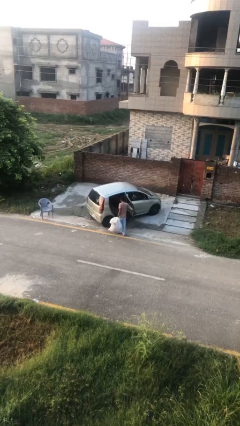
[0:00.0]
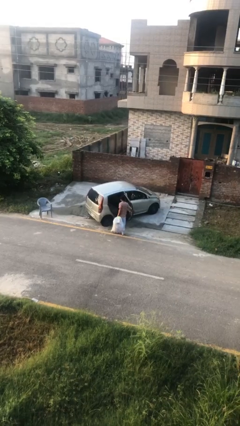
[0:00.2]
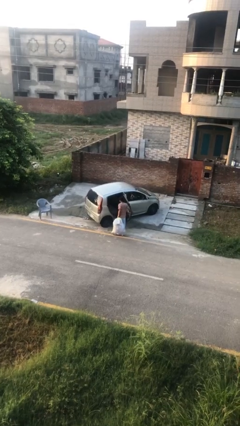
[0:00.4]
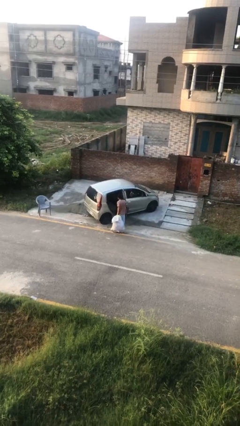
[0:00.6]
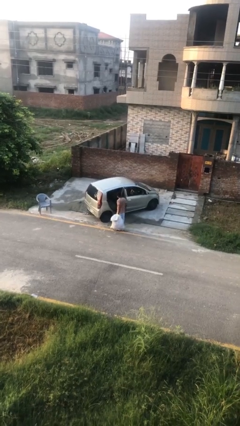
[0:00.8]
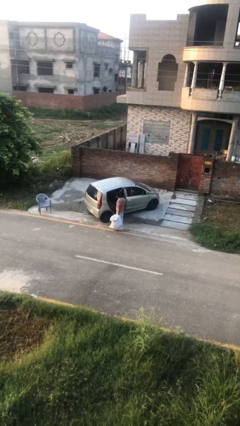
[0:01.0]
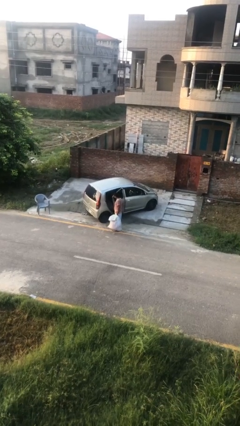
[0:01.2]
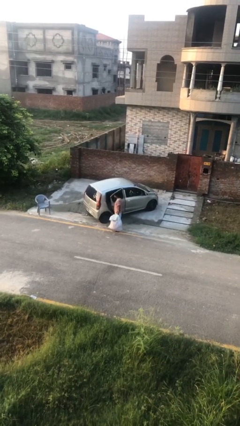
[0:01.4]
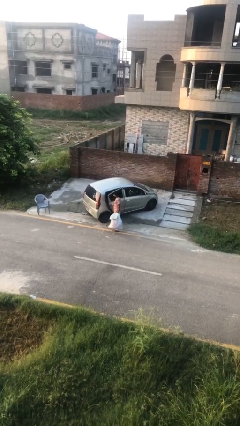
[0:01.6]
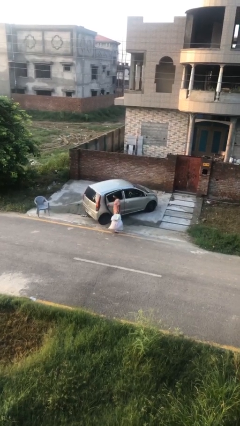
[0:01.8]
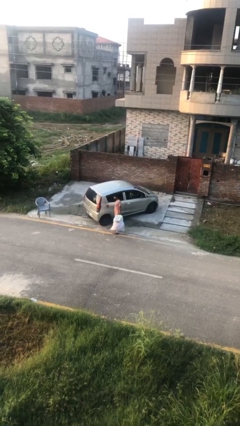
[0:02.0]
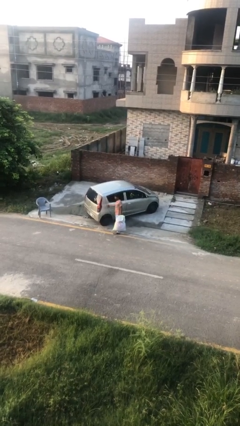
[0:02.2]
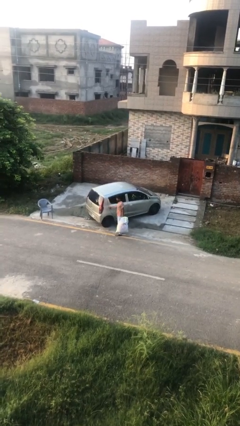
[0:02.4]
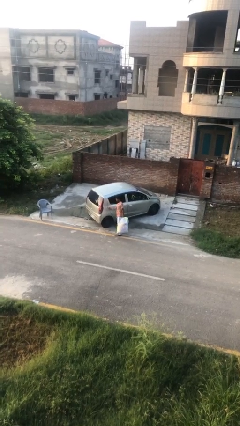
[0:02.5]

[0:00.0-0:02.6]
person closes car door

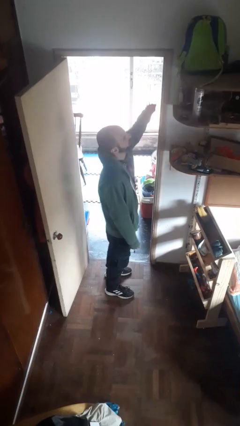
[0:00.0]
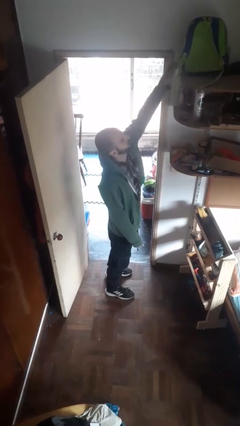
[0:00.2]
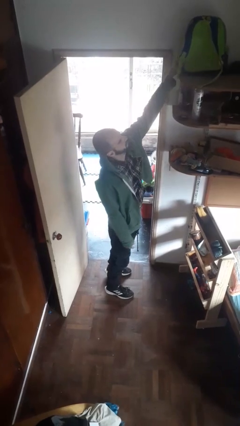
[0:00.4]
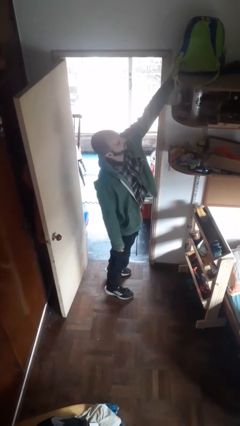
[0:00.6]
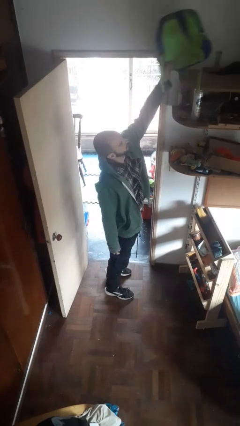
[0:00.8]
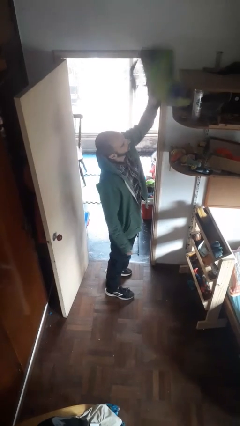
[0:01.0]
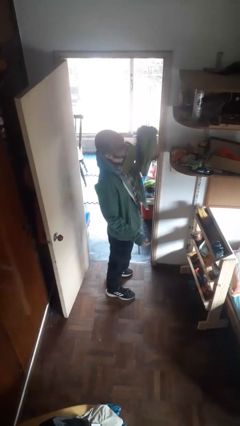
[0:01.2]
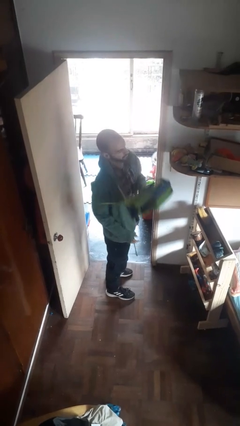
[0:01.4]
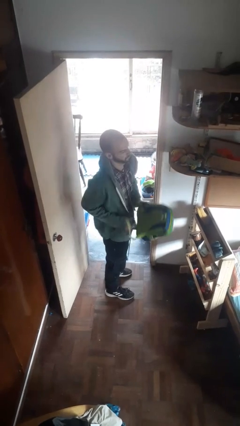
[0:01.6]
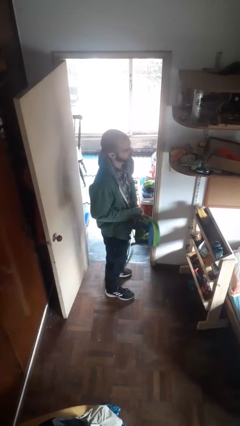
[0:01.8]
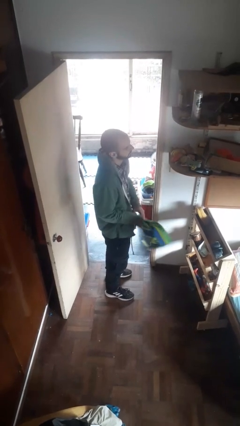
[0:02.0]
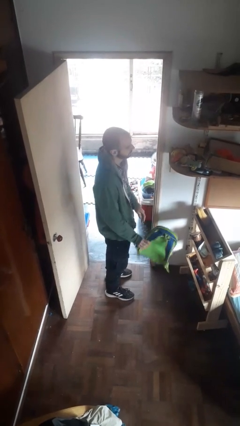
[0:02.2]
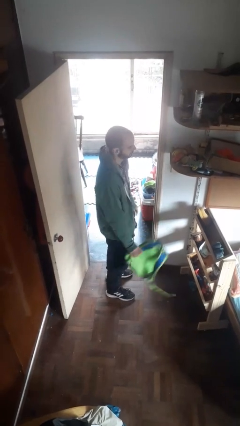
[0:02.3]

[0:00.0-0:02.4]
person puts down object on shelf

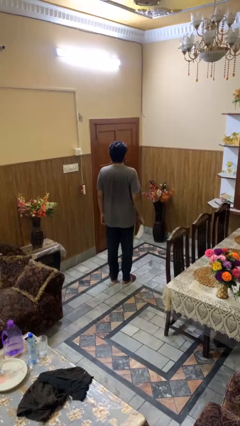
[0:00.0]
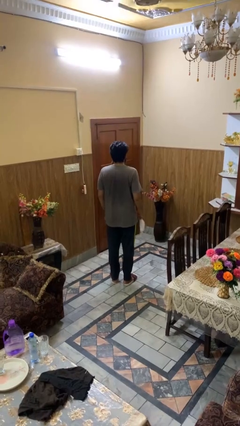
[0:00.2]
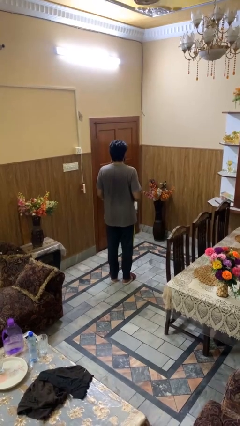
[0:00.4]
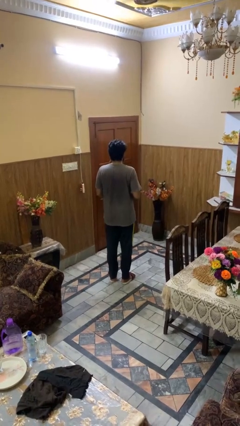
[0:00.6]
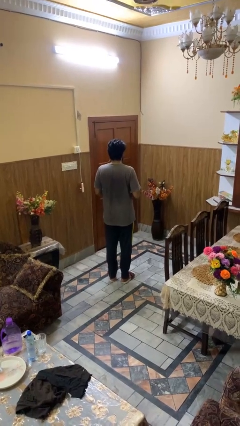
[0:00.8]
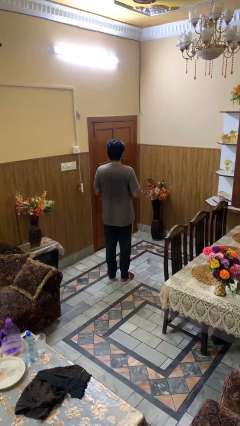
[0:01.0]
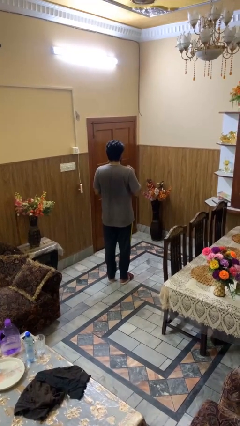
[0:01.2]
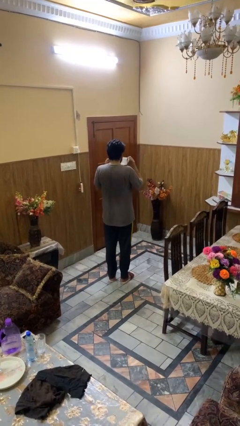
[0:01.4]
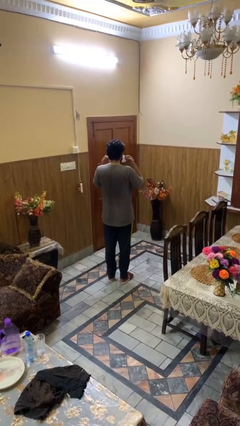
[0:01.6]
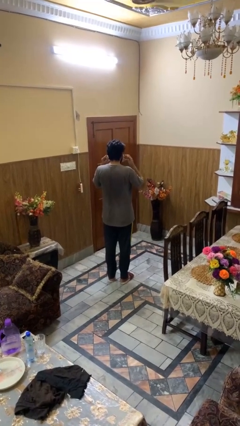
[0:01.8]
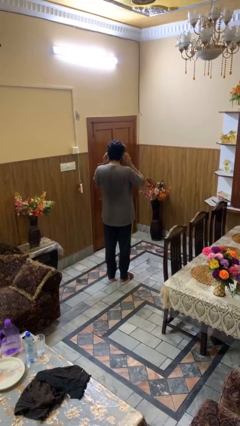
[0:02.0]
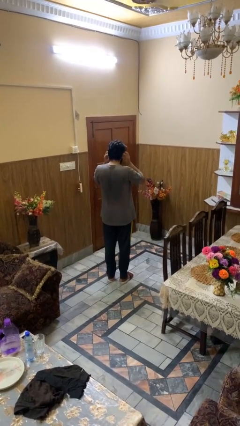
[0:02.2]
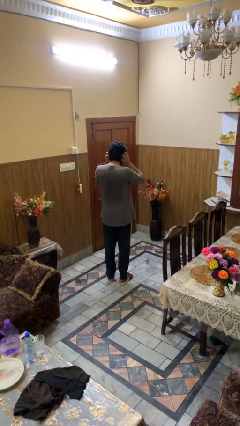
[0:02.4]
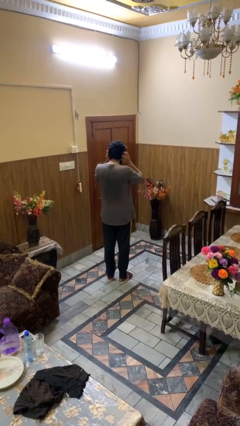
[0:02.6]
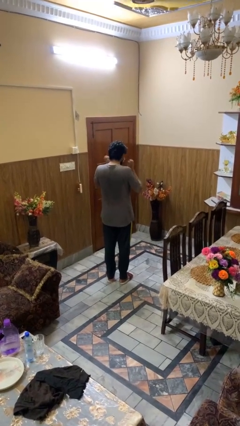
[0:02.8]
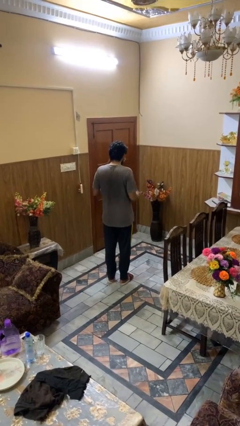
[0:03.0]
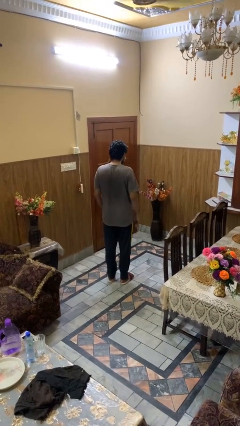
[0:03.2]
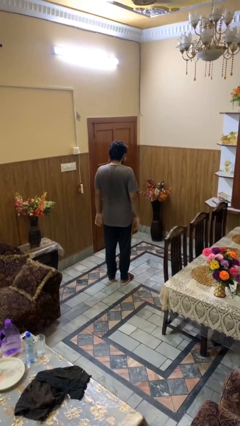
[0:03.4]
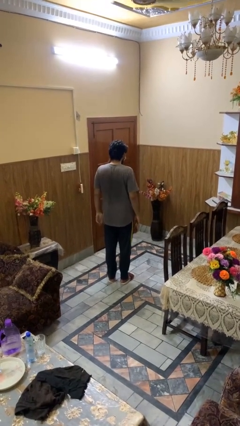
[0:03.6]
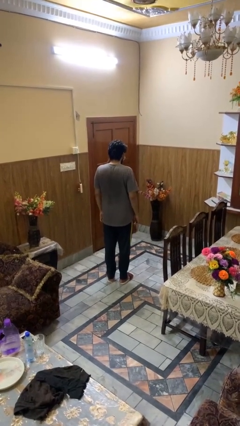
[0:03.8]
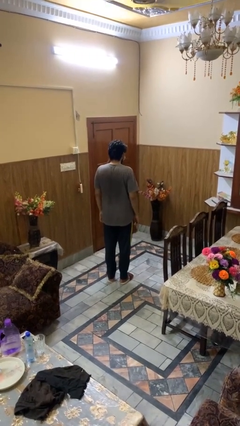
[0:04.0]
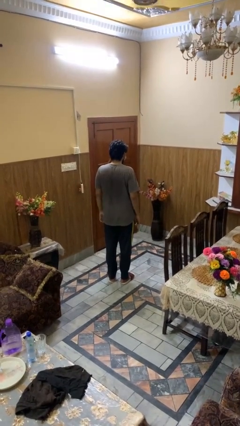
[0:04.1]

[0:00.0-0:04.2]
person puts on facemask

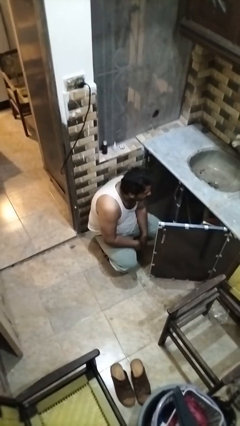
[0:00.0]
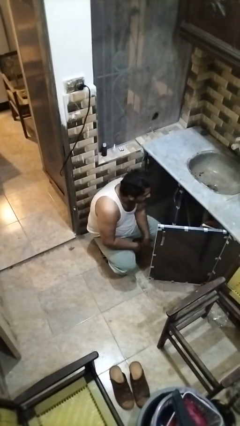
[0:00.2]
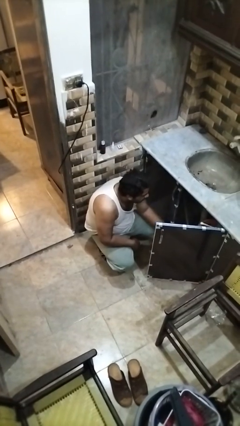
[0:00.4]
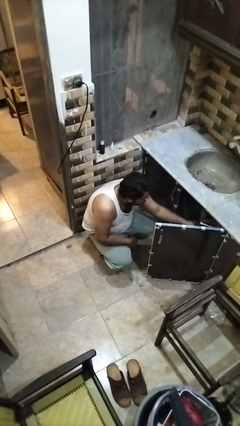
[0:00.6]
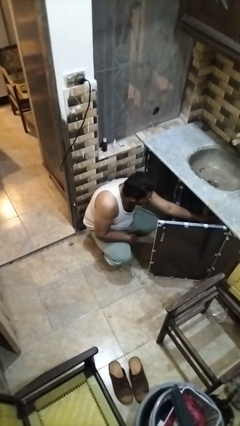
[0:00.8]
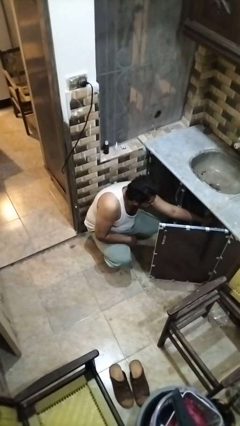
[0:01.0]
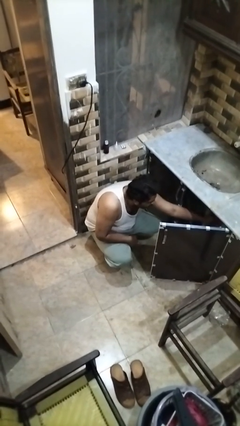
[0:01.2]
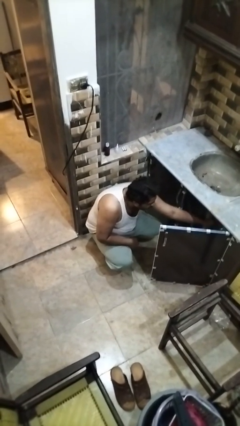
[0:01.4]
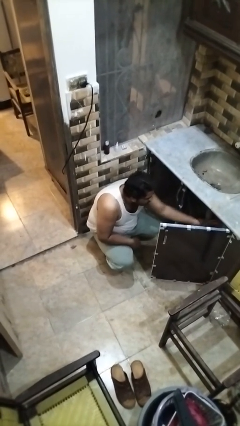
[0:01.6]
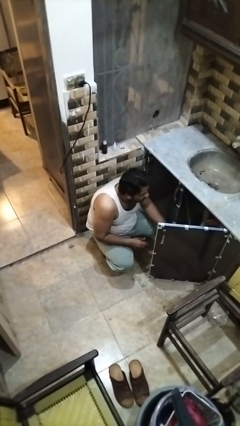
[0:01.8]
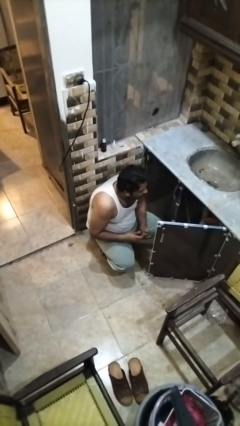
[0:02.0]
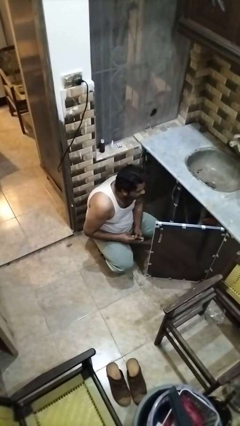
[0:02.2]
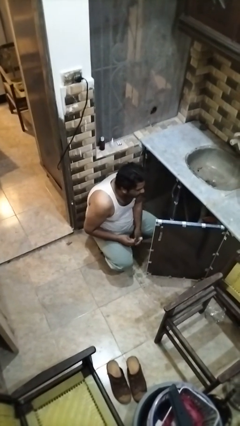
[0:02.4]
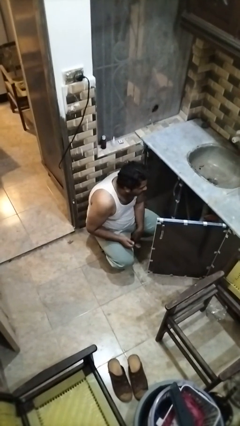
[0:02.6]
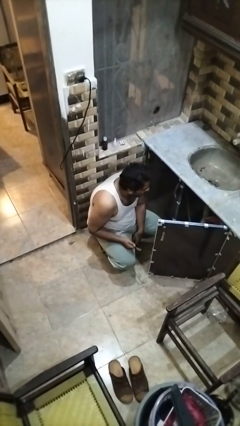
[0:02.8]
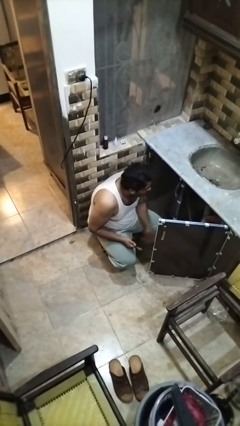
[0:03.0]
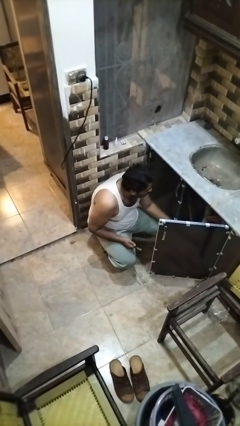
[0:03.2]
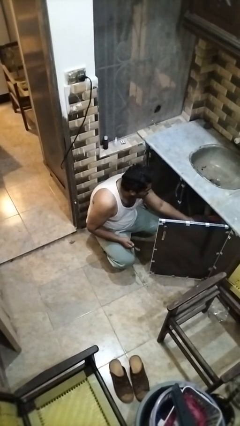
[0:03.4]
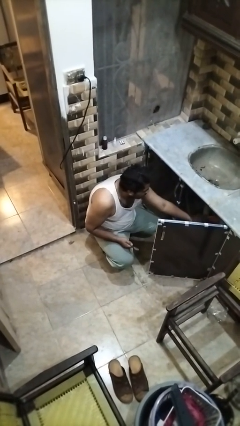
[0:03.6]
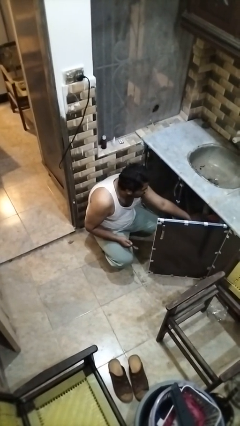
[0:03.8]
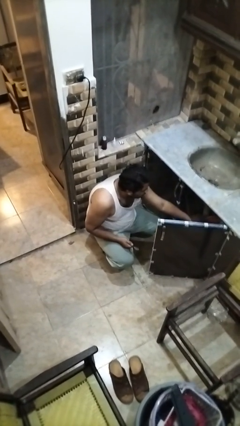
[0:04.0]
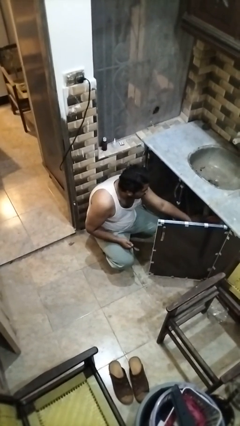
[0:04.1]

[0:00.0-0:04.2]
person takes object from kitchen drawer

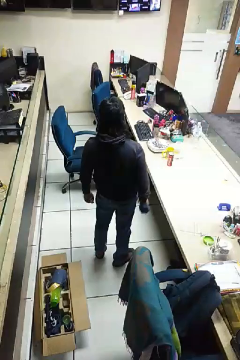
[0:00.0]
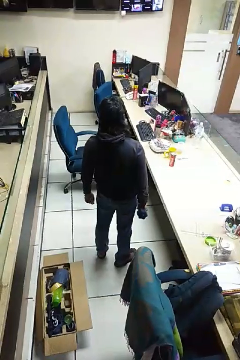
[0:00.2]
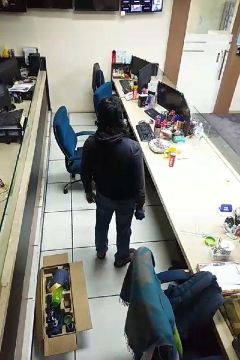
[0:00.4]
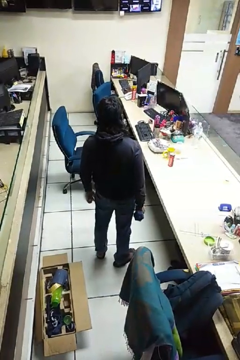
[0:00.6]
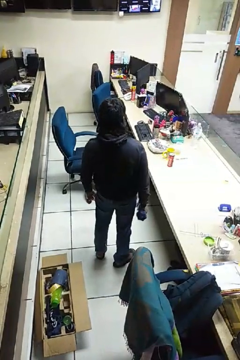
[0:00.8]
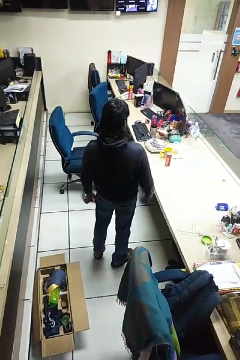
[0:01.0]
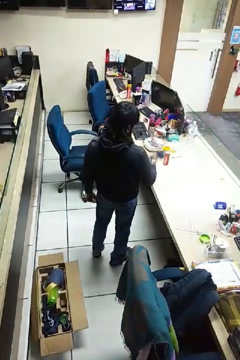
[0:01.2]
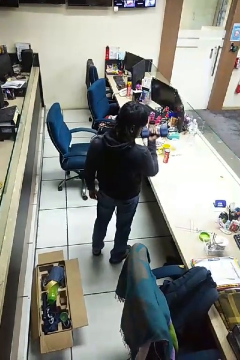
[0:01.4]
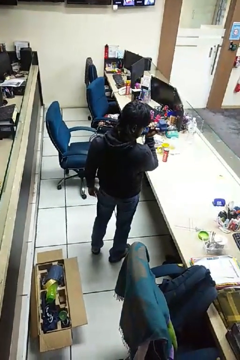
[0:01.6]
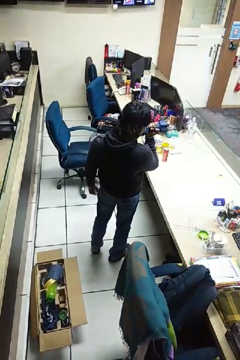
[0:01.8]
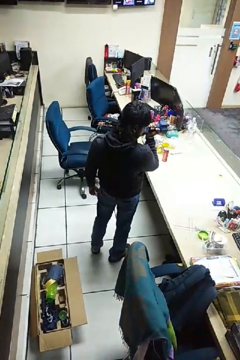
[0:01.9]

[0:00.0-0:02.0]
person lifts dumbbells

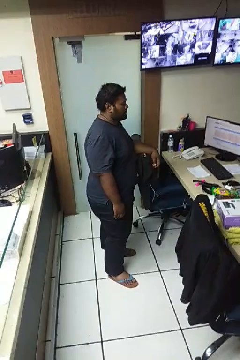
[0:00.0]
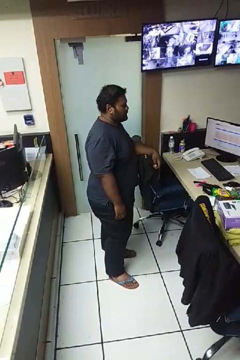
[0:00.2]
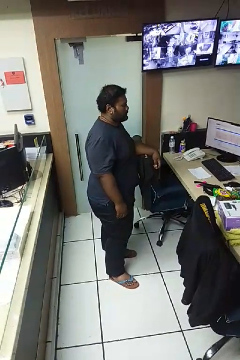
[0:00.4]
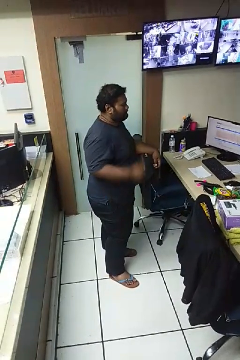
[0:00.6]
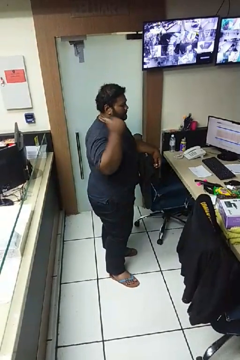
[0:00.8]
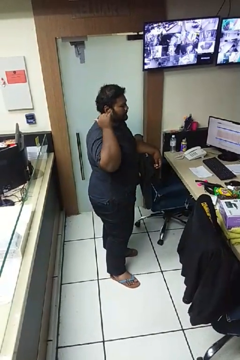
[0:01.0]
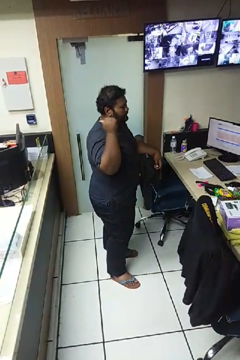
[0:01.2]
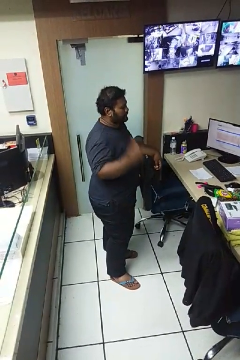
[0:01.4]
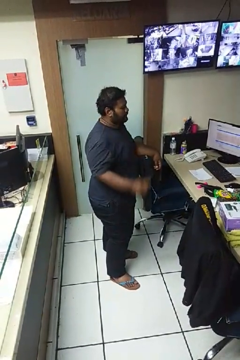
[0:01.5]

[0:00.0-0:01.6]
person gestures behind me

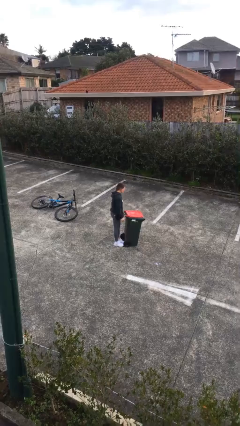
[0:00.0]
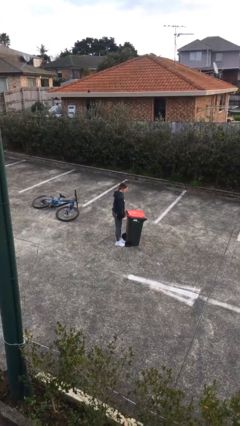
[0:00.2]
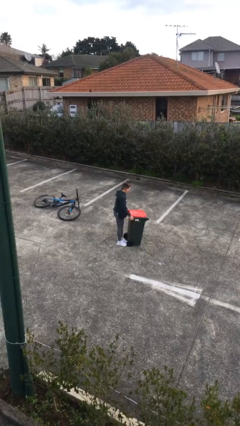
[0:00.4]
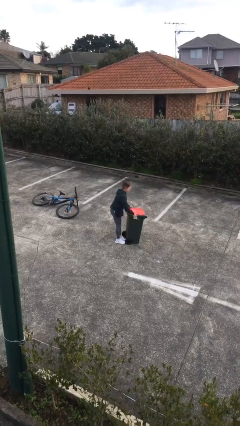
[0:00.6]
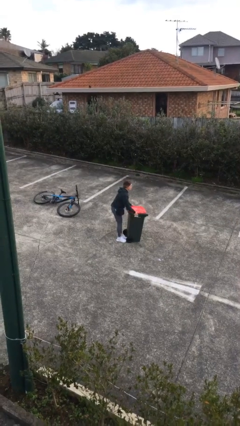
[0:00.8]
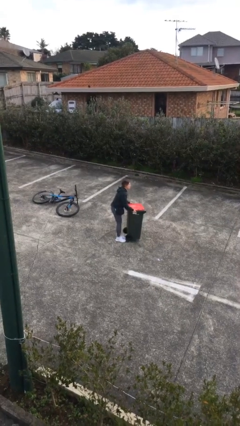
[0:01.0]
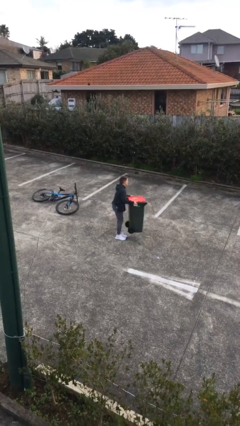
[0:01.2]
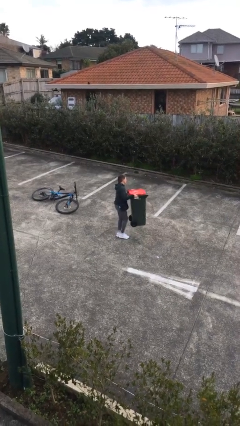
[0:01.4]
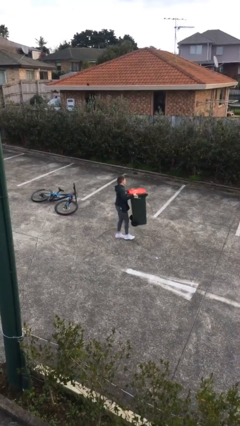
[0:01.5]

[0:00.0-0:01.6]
person picks up object from floor
